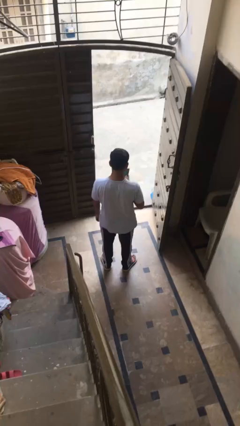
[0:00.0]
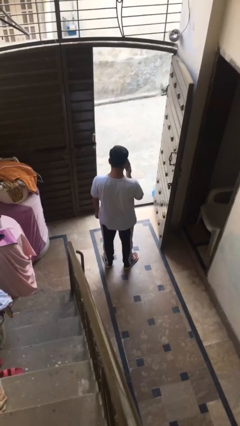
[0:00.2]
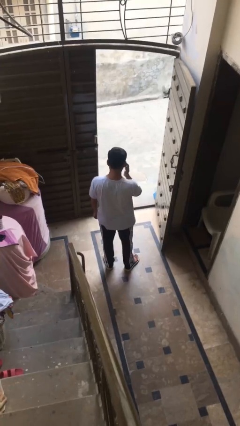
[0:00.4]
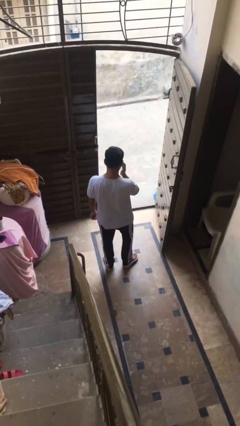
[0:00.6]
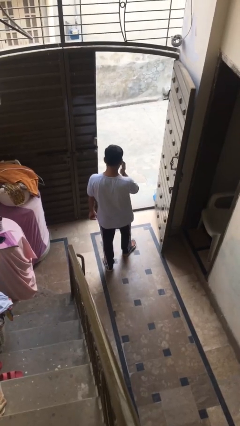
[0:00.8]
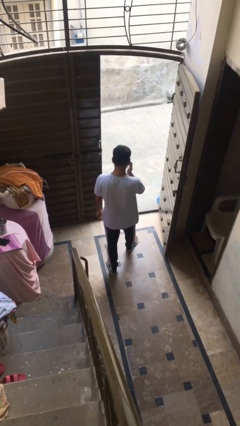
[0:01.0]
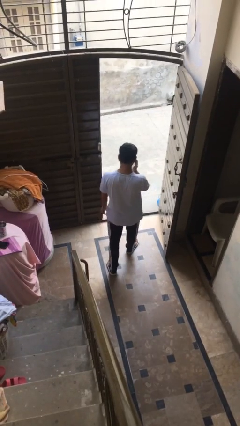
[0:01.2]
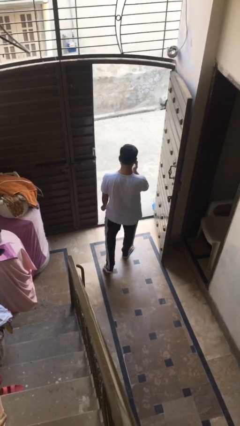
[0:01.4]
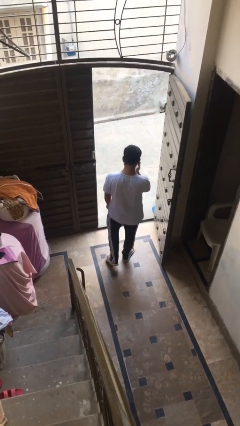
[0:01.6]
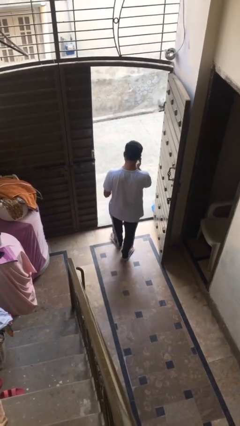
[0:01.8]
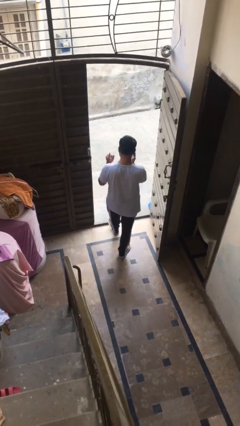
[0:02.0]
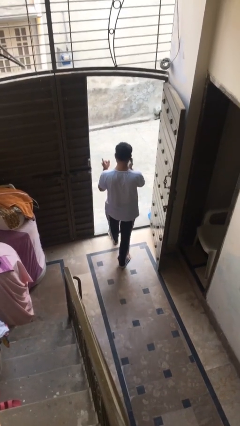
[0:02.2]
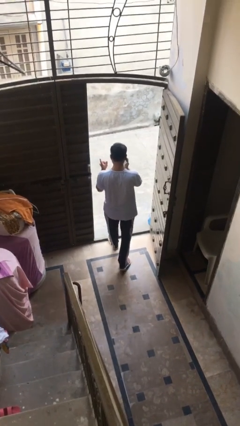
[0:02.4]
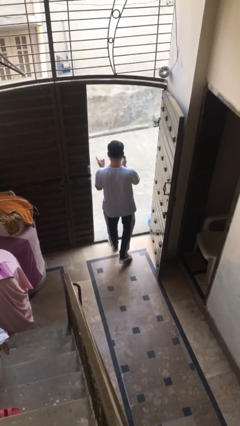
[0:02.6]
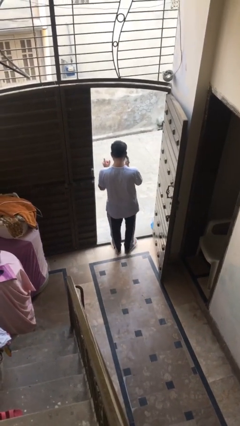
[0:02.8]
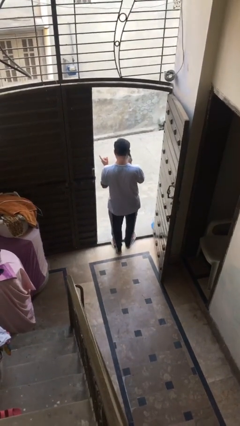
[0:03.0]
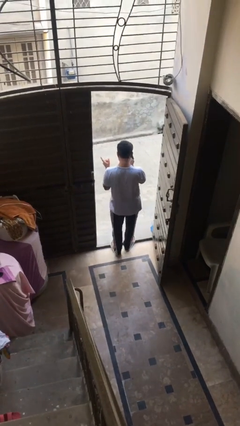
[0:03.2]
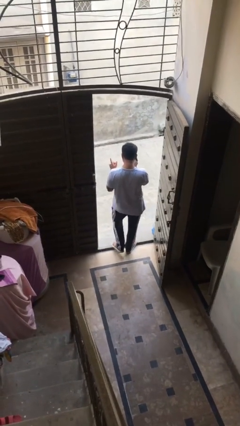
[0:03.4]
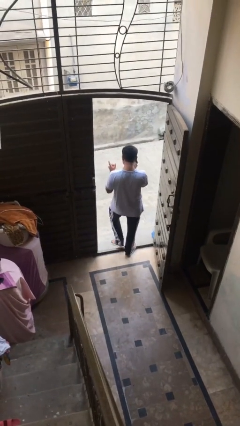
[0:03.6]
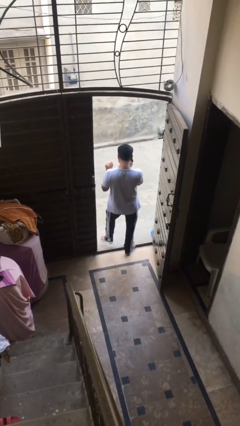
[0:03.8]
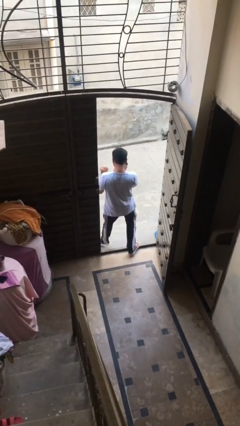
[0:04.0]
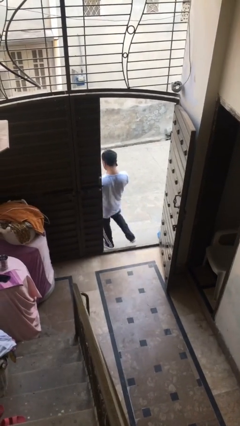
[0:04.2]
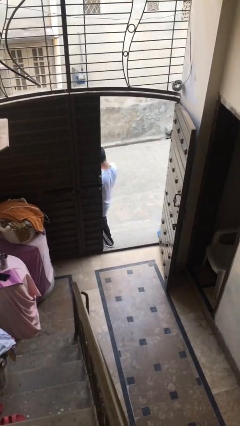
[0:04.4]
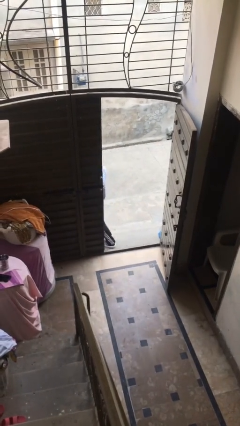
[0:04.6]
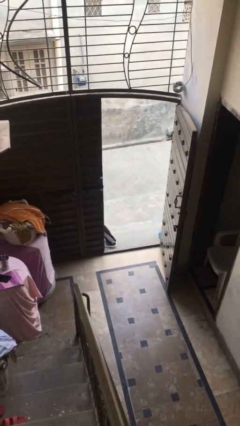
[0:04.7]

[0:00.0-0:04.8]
person exits scene through structure

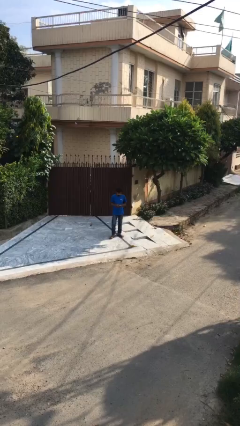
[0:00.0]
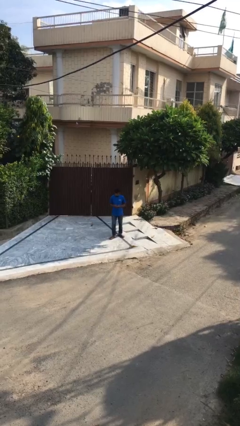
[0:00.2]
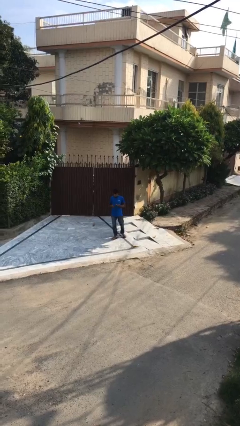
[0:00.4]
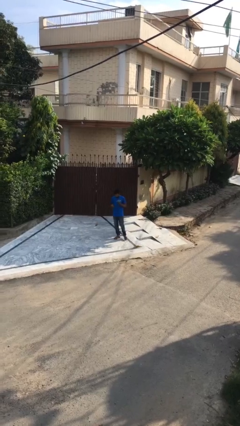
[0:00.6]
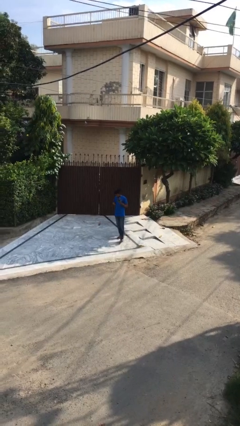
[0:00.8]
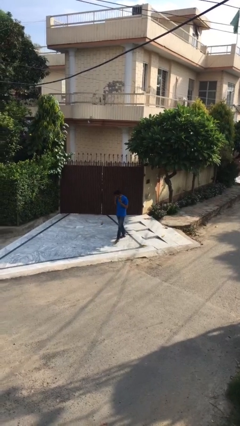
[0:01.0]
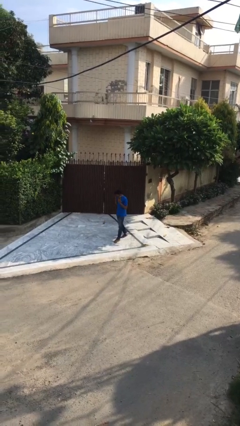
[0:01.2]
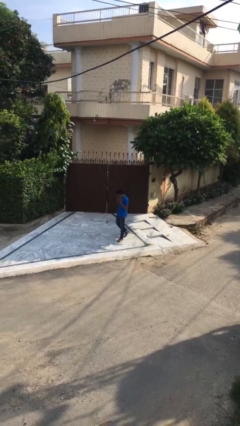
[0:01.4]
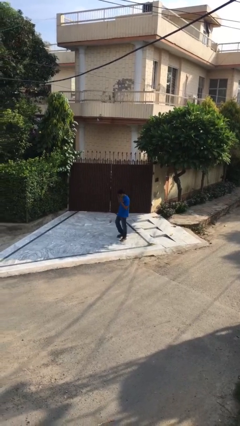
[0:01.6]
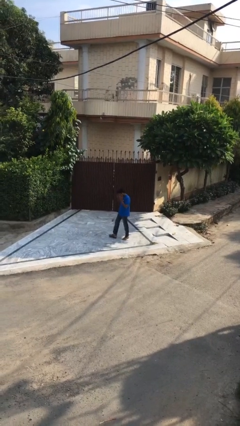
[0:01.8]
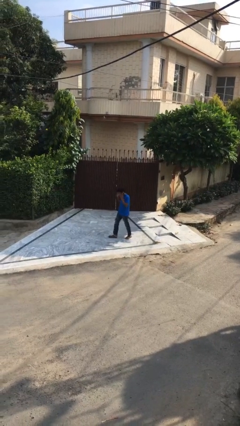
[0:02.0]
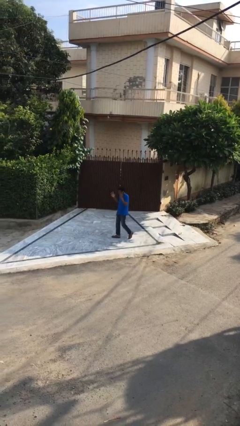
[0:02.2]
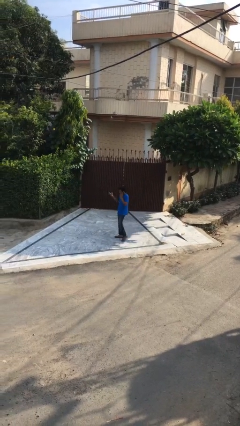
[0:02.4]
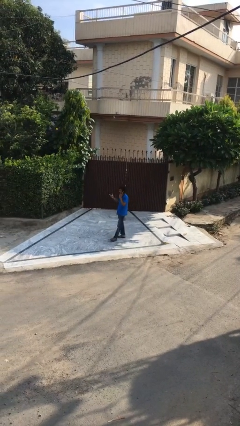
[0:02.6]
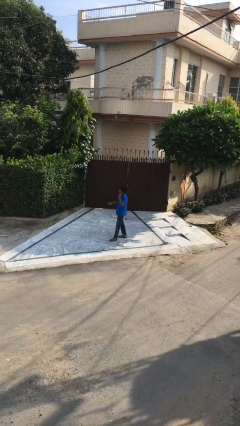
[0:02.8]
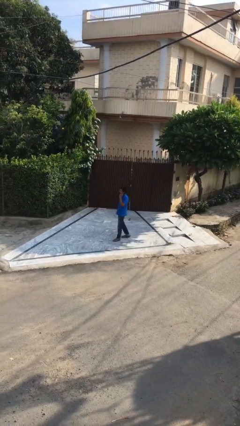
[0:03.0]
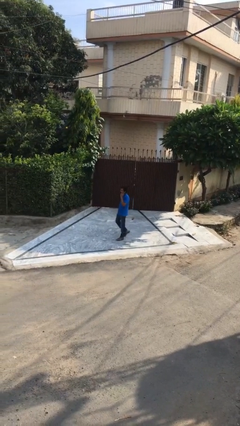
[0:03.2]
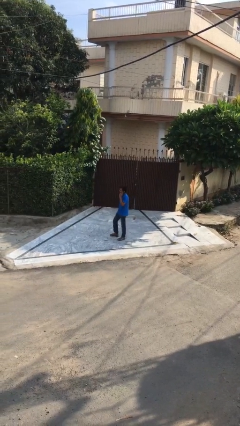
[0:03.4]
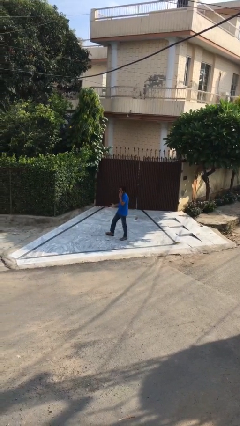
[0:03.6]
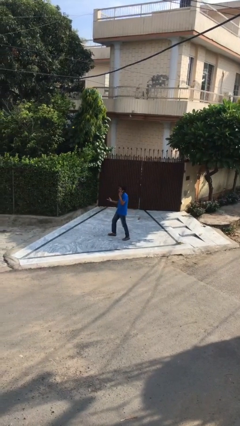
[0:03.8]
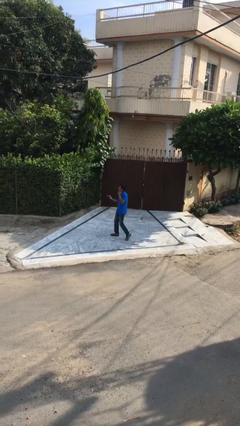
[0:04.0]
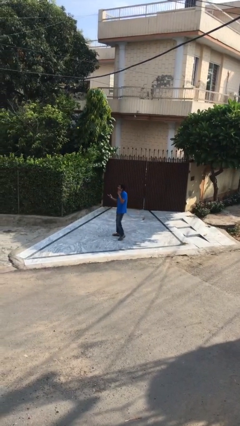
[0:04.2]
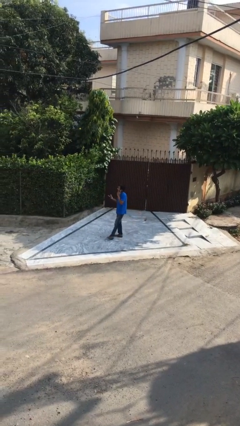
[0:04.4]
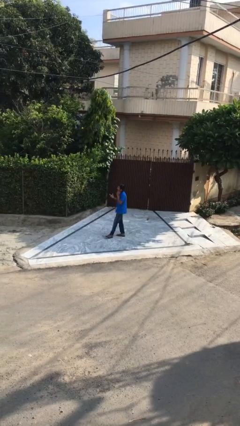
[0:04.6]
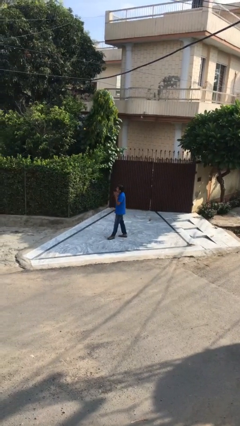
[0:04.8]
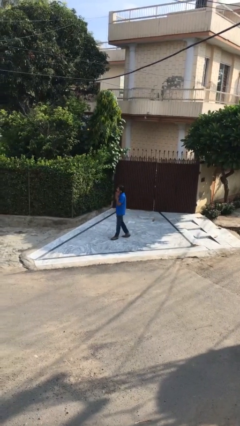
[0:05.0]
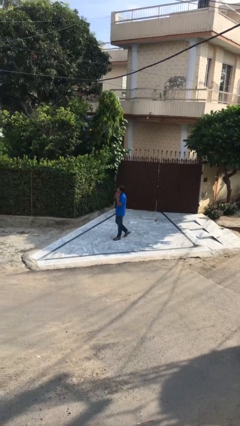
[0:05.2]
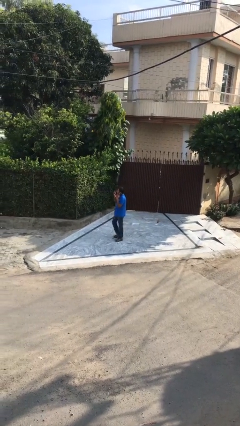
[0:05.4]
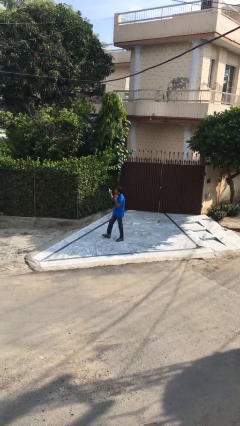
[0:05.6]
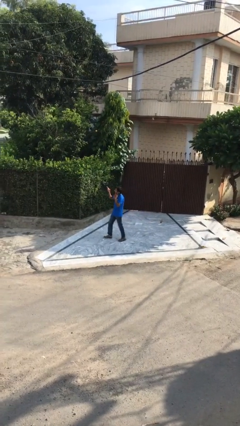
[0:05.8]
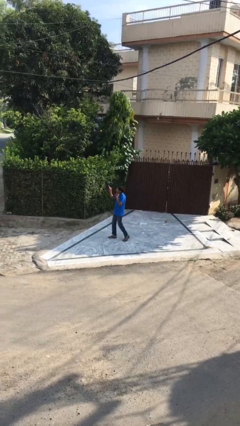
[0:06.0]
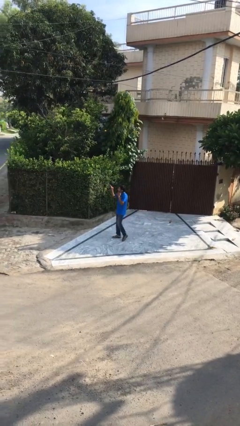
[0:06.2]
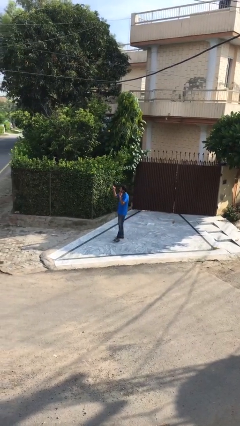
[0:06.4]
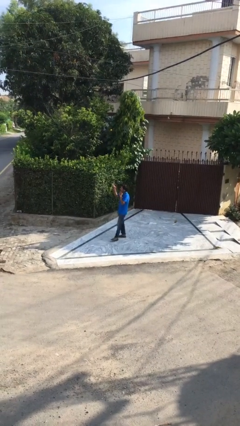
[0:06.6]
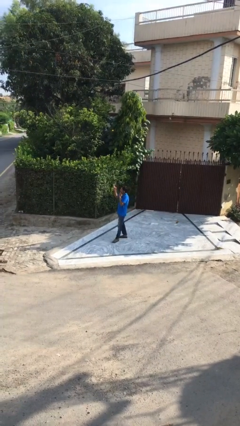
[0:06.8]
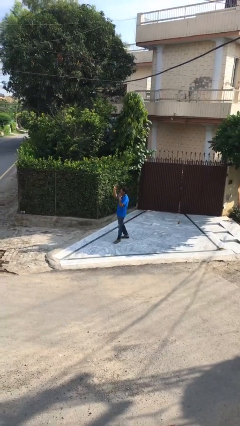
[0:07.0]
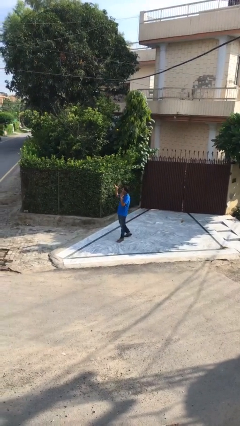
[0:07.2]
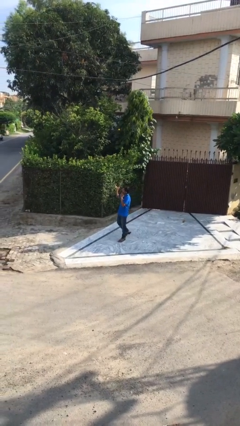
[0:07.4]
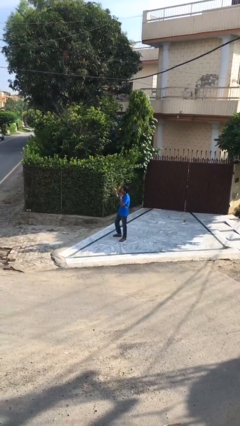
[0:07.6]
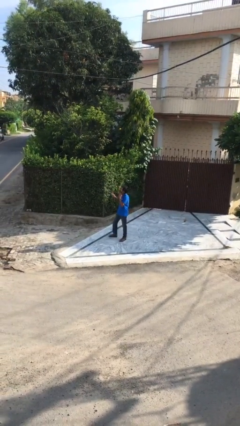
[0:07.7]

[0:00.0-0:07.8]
person talks on phone

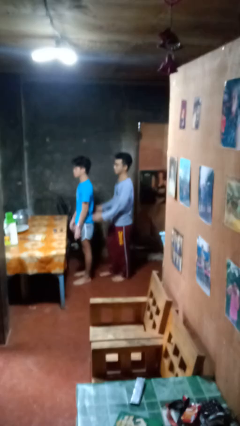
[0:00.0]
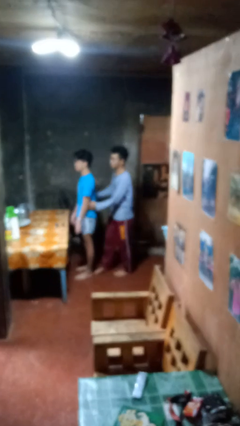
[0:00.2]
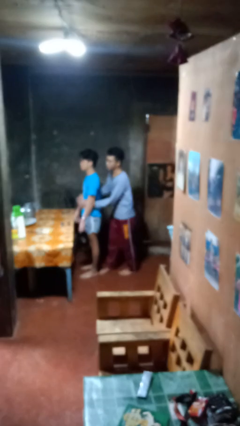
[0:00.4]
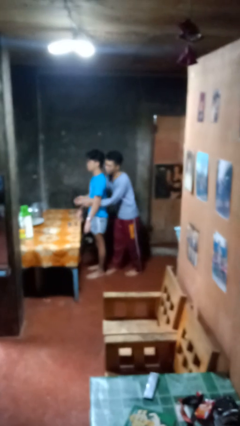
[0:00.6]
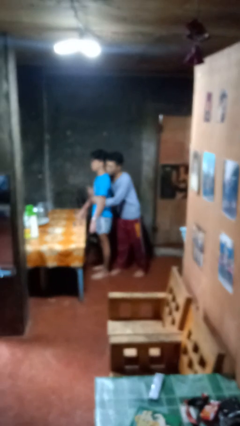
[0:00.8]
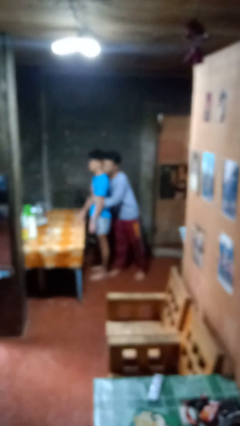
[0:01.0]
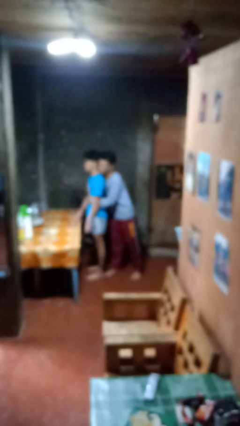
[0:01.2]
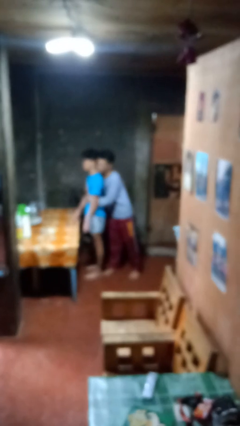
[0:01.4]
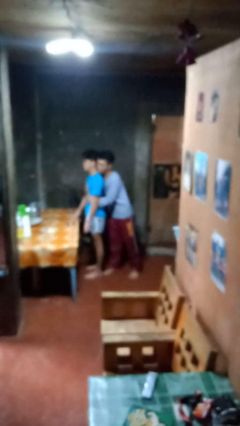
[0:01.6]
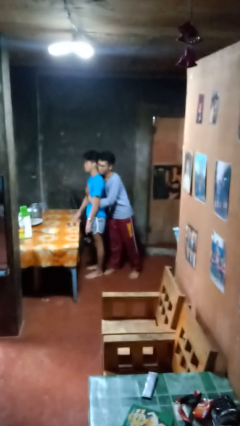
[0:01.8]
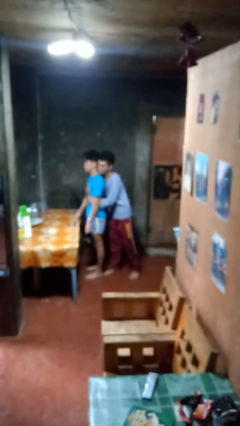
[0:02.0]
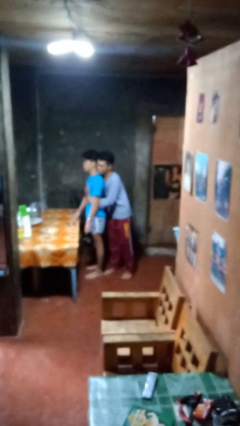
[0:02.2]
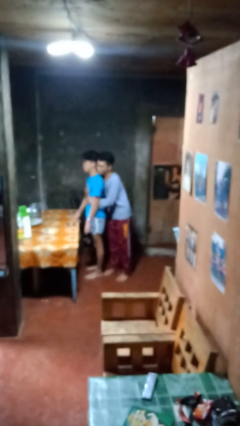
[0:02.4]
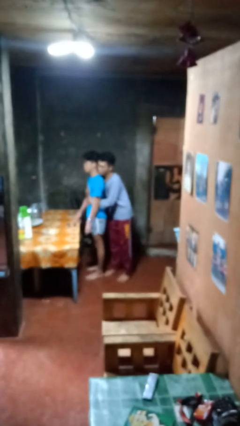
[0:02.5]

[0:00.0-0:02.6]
person hugs person from behind

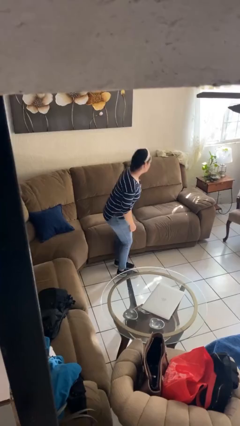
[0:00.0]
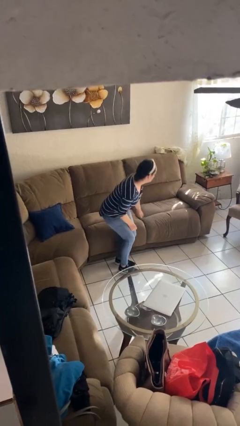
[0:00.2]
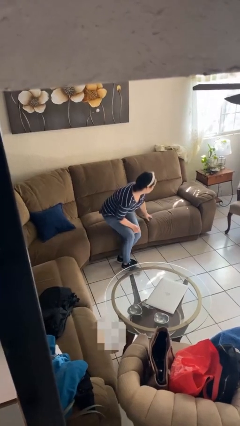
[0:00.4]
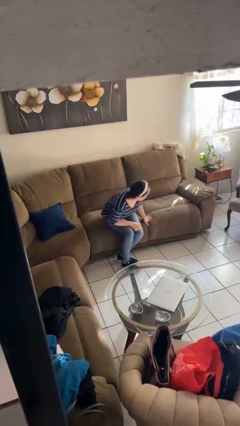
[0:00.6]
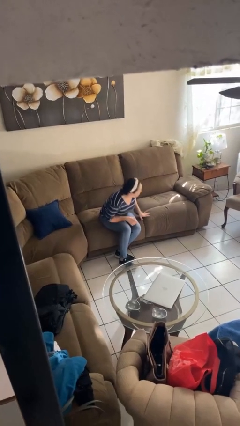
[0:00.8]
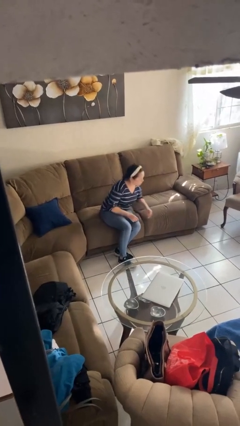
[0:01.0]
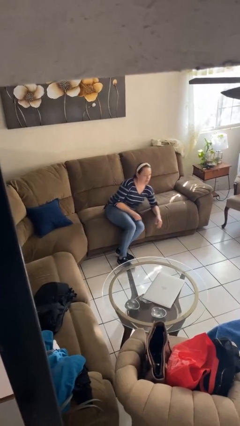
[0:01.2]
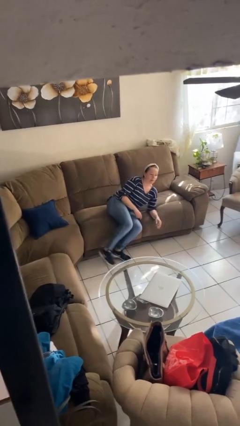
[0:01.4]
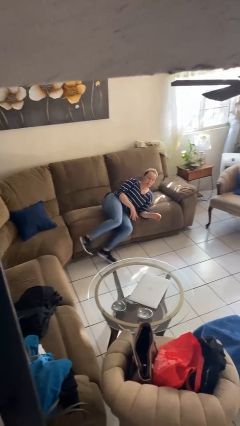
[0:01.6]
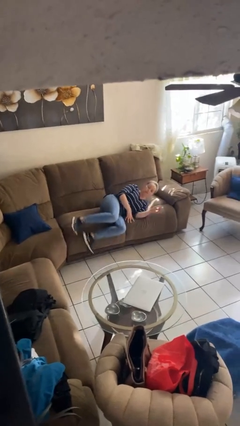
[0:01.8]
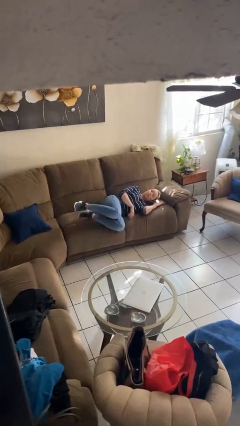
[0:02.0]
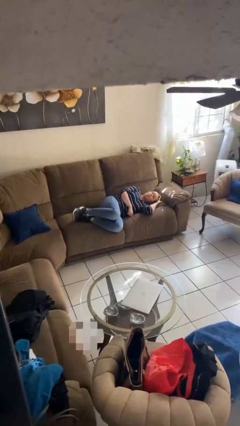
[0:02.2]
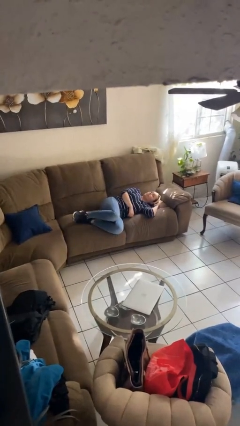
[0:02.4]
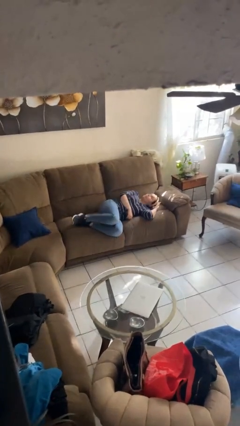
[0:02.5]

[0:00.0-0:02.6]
person lies down on couch
